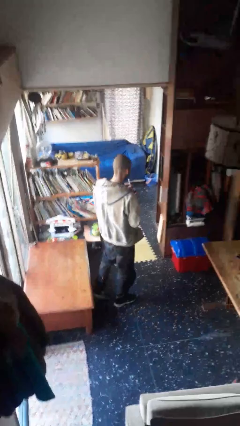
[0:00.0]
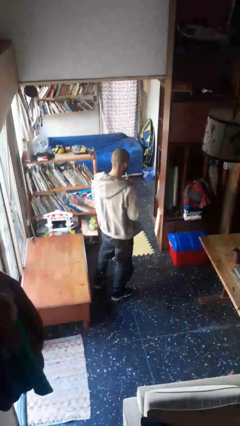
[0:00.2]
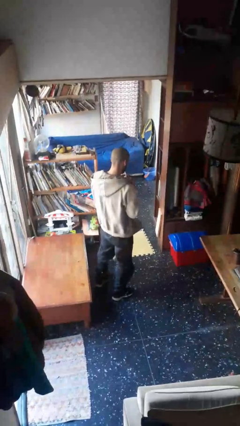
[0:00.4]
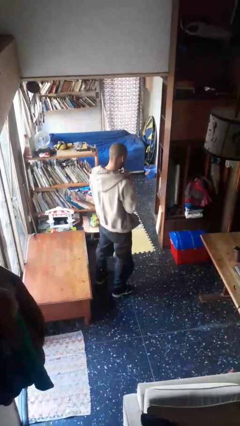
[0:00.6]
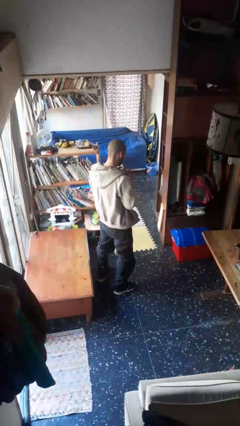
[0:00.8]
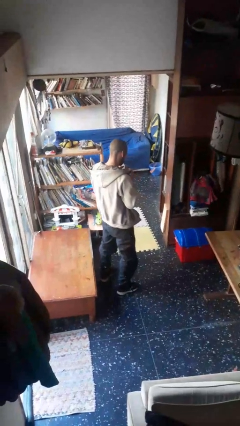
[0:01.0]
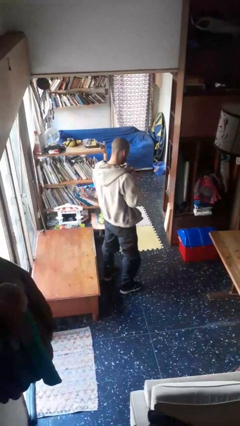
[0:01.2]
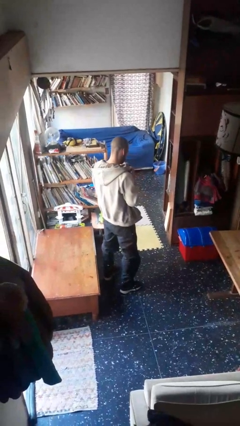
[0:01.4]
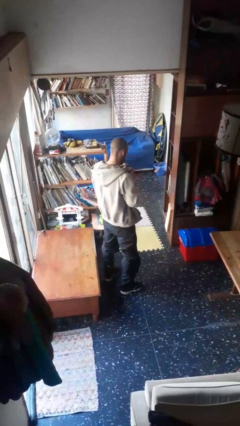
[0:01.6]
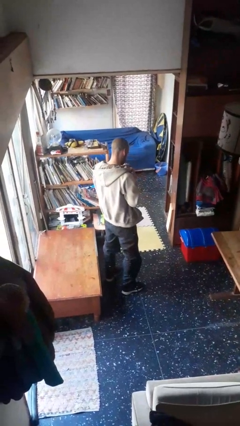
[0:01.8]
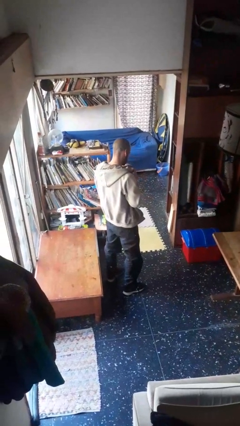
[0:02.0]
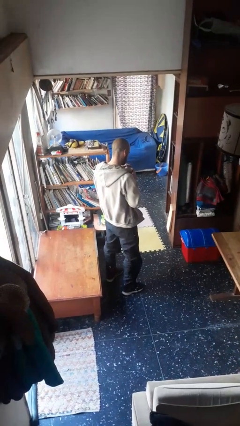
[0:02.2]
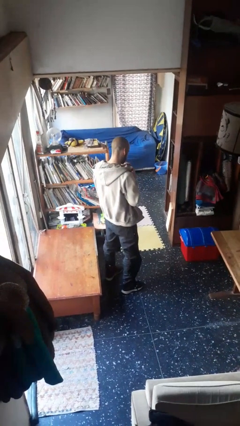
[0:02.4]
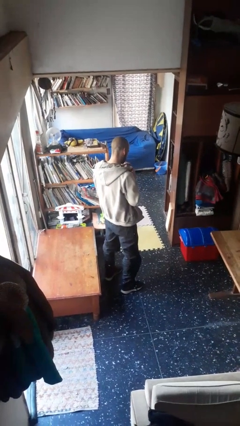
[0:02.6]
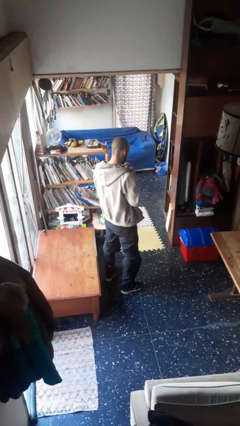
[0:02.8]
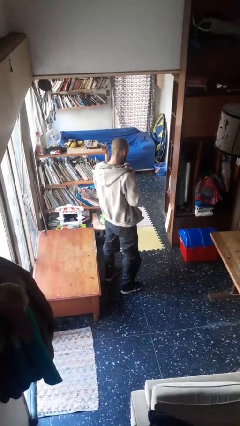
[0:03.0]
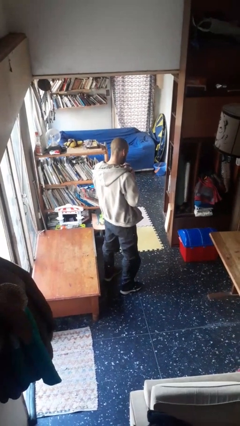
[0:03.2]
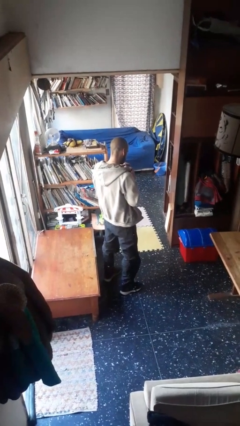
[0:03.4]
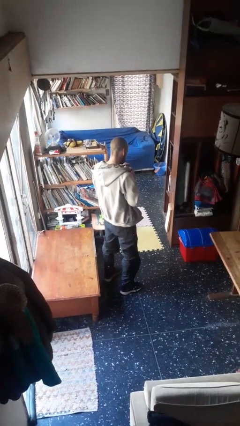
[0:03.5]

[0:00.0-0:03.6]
person drinks from straw

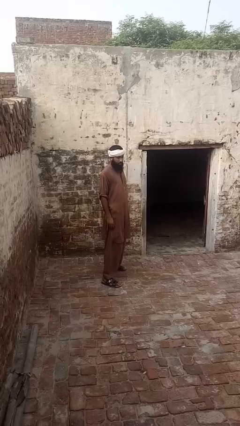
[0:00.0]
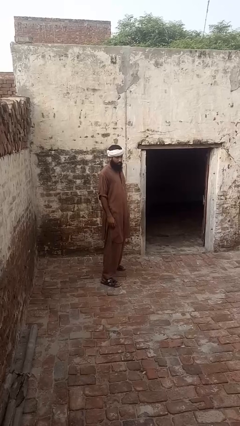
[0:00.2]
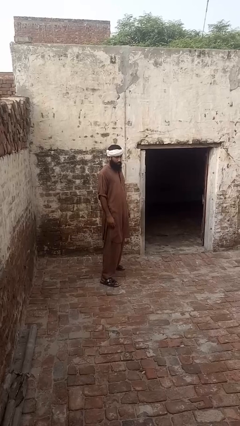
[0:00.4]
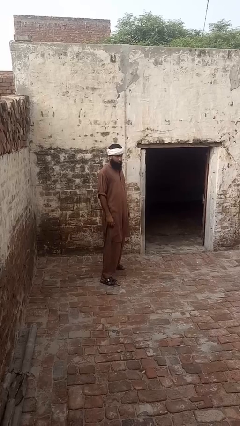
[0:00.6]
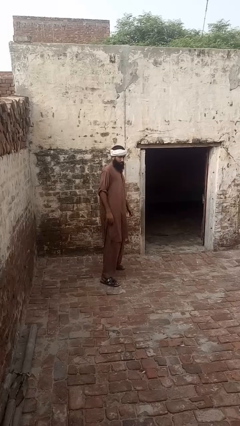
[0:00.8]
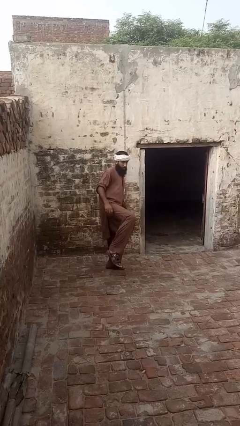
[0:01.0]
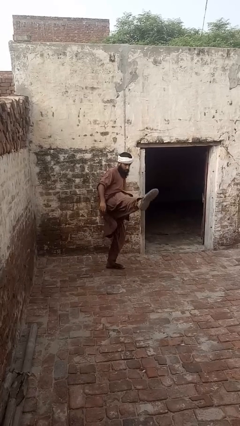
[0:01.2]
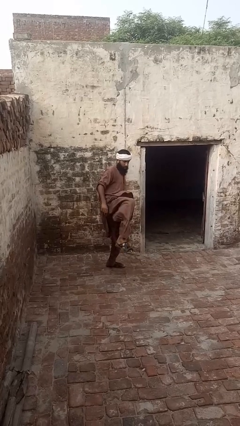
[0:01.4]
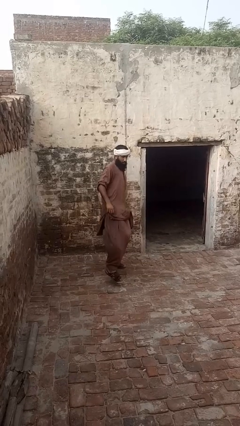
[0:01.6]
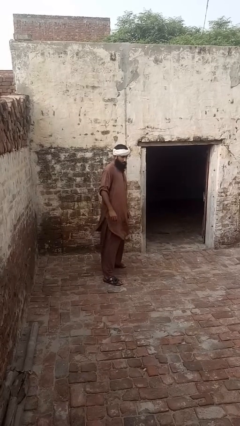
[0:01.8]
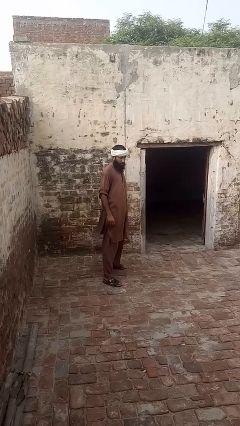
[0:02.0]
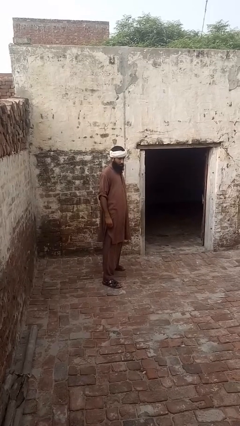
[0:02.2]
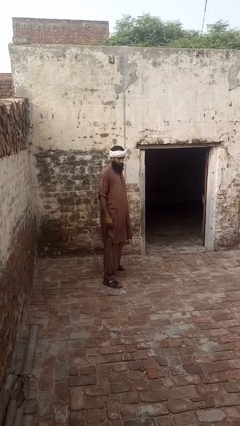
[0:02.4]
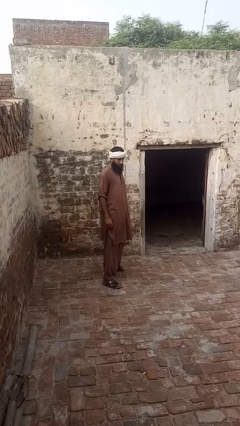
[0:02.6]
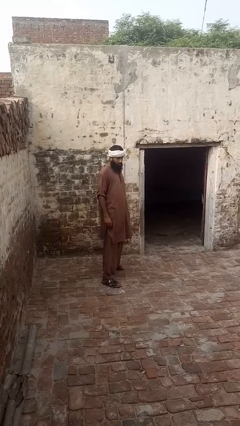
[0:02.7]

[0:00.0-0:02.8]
person karate kicks

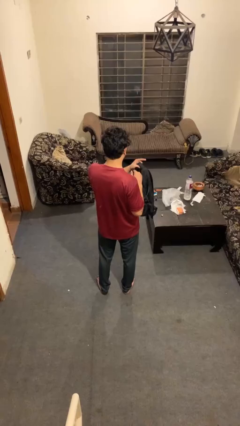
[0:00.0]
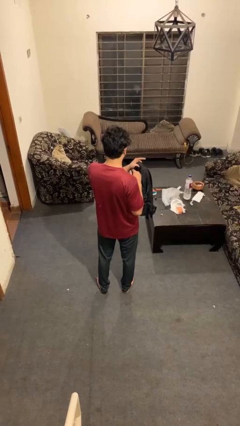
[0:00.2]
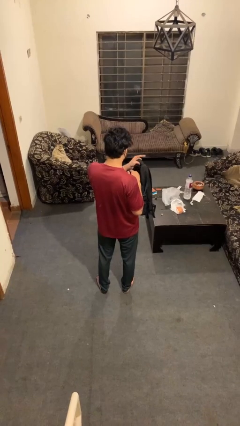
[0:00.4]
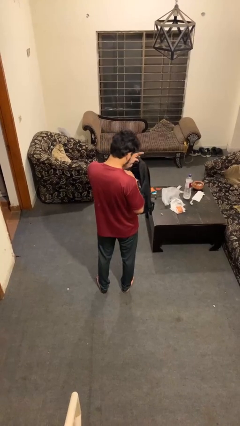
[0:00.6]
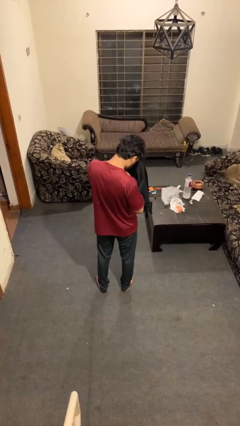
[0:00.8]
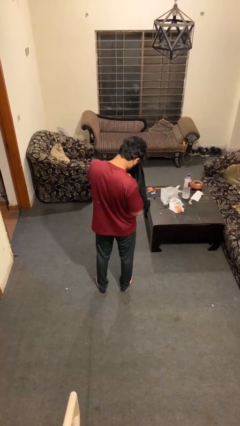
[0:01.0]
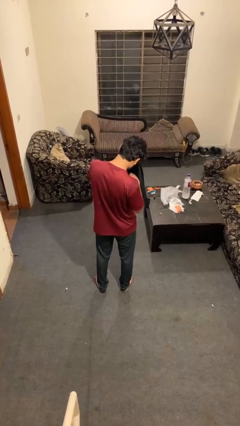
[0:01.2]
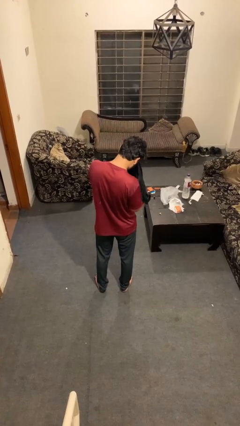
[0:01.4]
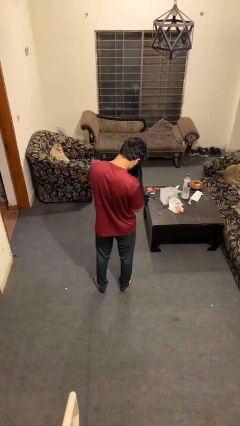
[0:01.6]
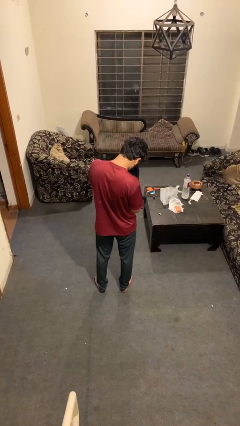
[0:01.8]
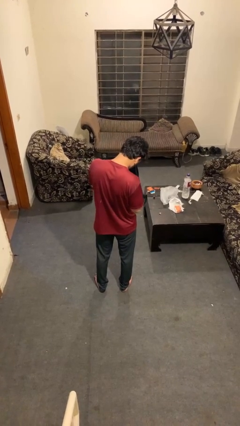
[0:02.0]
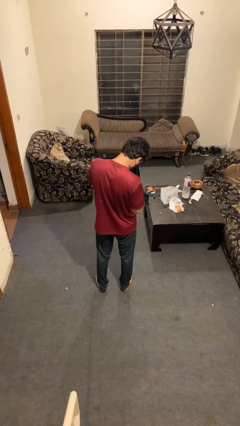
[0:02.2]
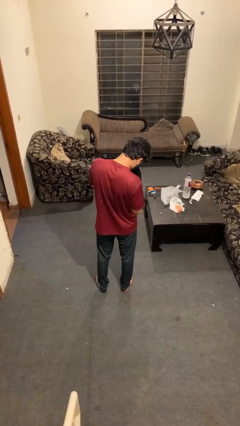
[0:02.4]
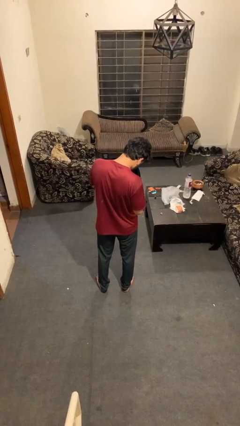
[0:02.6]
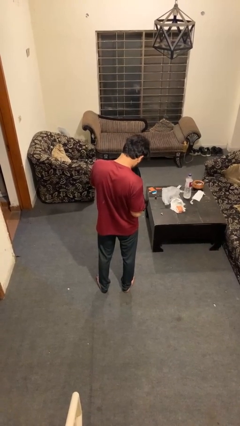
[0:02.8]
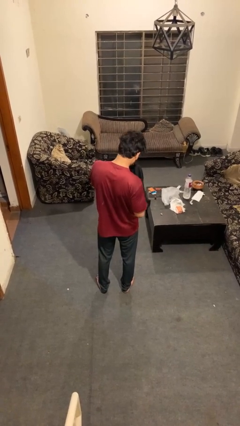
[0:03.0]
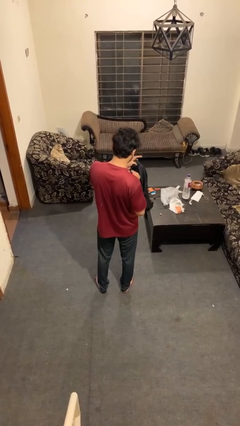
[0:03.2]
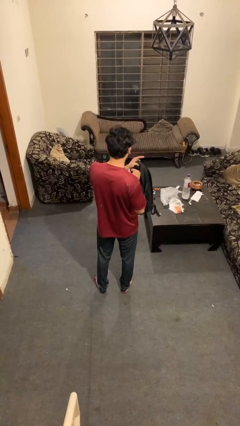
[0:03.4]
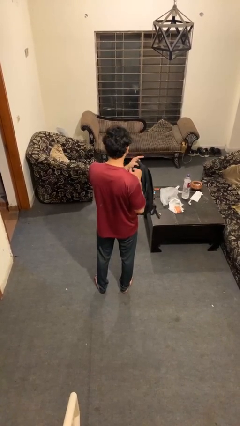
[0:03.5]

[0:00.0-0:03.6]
person searches in bag

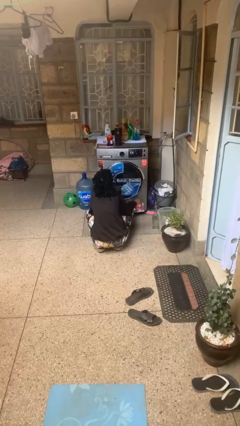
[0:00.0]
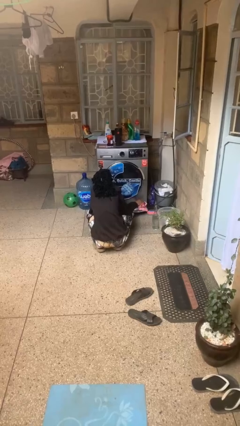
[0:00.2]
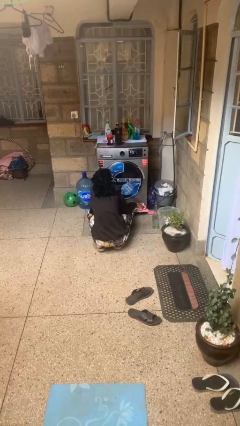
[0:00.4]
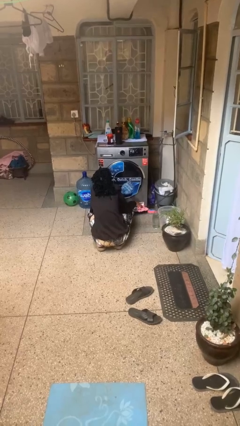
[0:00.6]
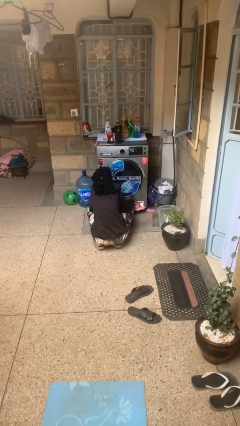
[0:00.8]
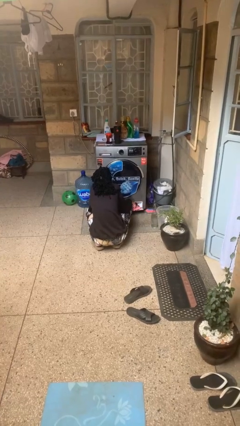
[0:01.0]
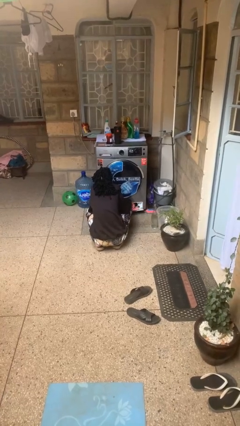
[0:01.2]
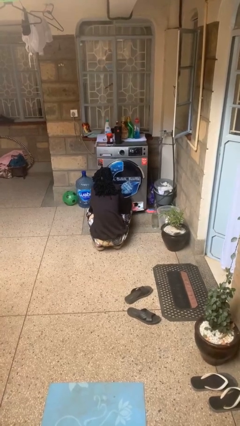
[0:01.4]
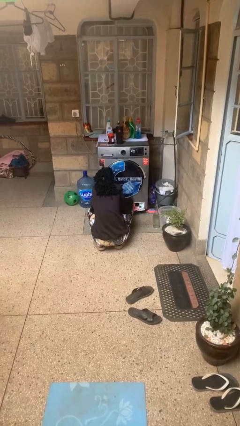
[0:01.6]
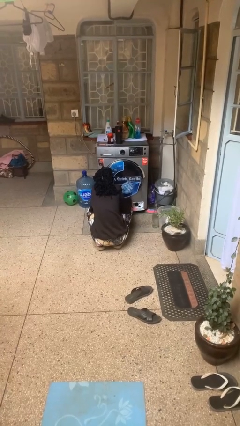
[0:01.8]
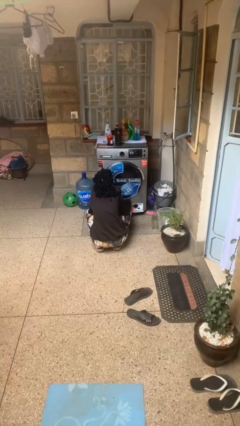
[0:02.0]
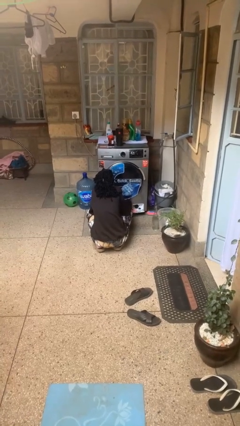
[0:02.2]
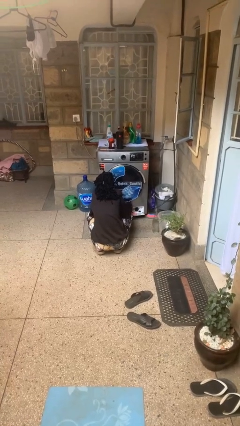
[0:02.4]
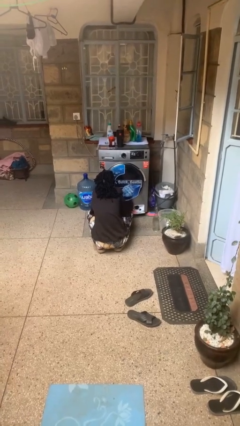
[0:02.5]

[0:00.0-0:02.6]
person cleans dryer lint trap

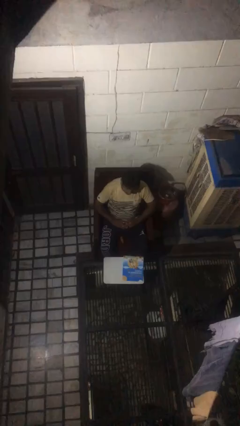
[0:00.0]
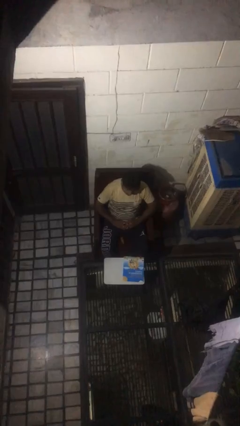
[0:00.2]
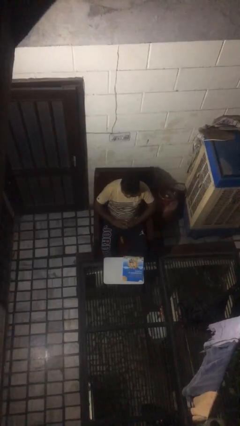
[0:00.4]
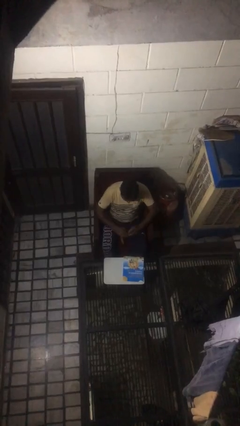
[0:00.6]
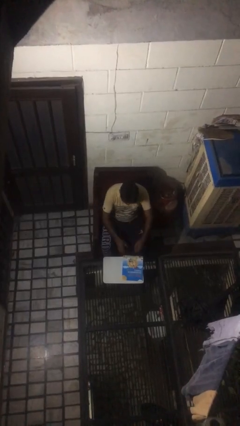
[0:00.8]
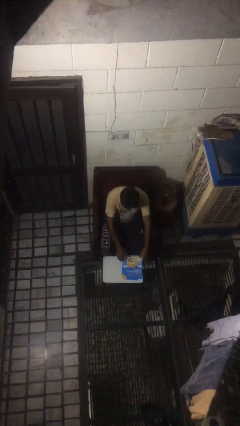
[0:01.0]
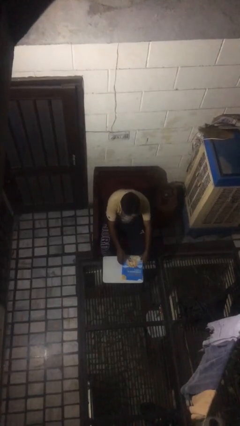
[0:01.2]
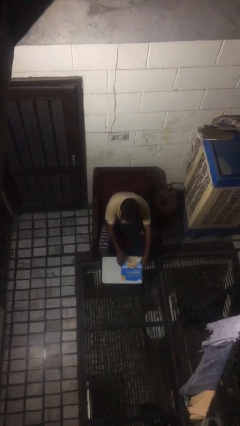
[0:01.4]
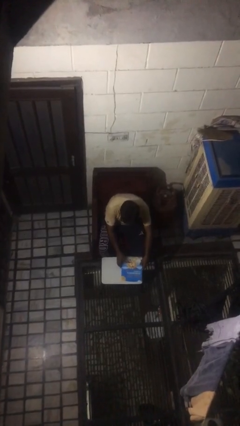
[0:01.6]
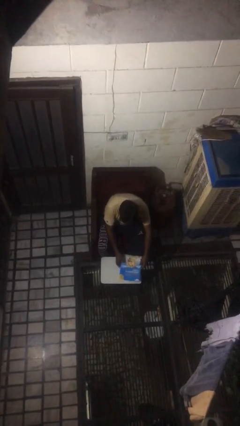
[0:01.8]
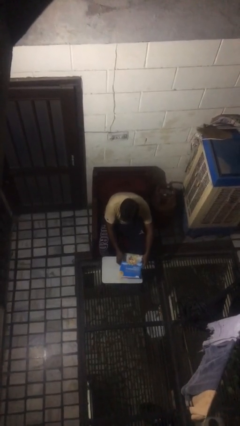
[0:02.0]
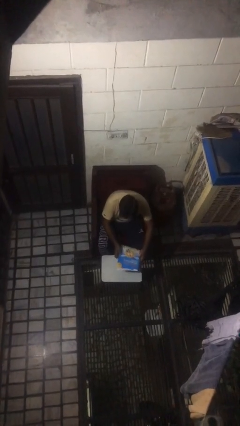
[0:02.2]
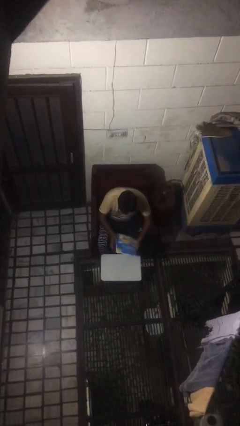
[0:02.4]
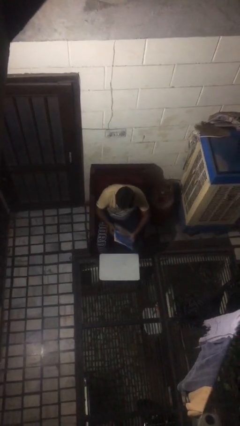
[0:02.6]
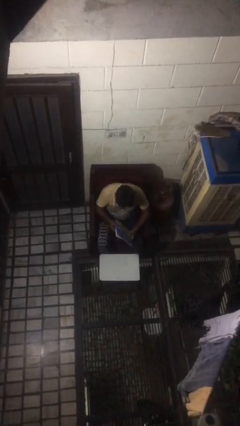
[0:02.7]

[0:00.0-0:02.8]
person picks up object from table

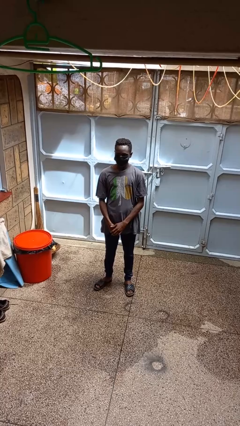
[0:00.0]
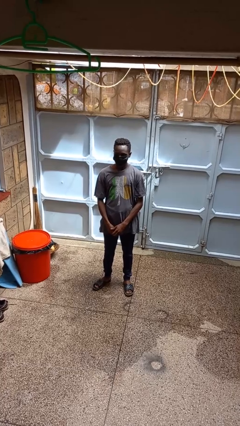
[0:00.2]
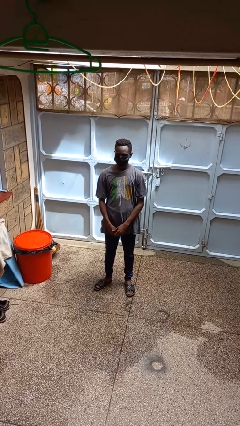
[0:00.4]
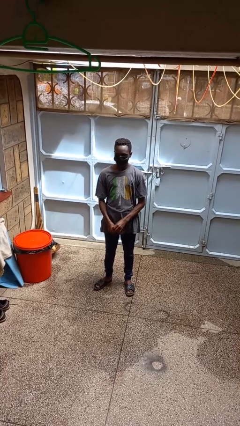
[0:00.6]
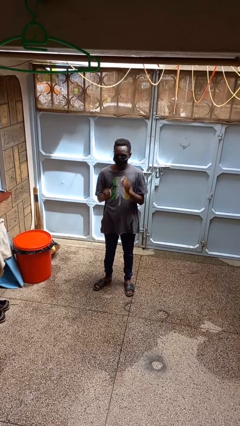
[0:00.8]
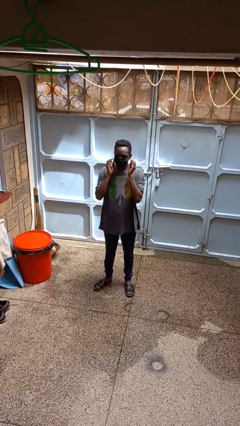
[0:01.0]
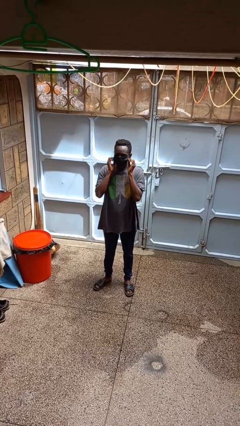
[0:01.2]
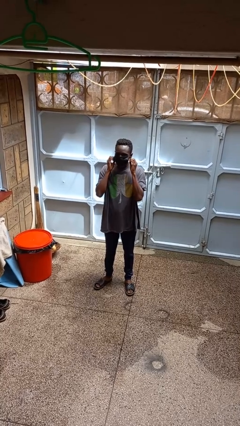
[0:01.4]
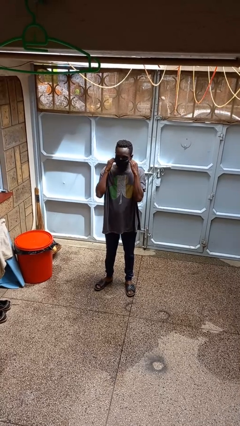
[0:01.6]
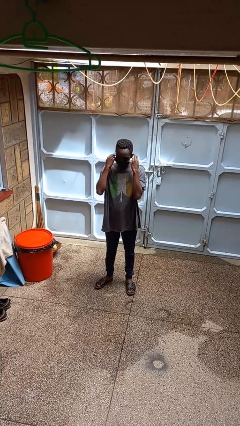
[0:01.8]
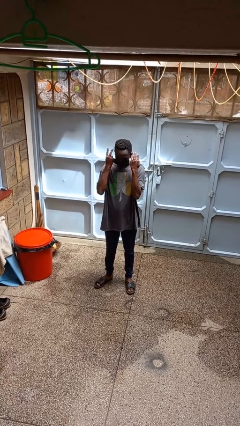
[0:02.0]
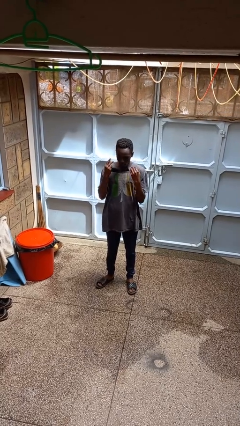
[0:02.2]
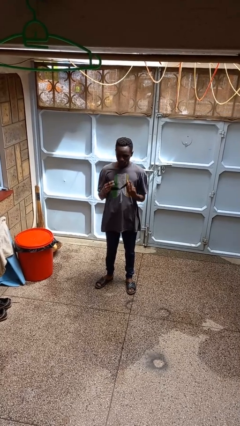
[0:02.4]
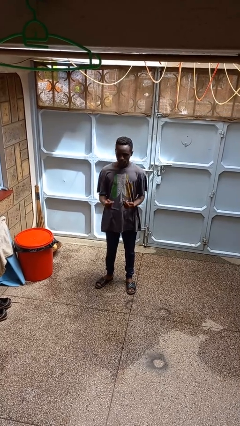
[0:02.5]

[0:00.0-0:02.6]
person takes off facemask
